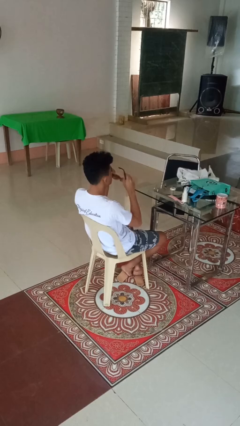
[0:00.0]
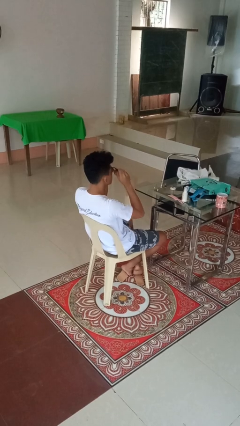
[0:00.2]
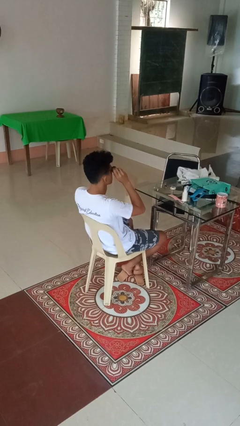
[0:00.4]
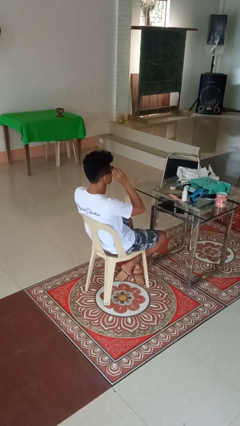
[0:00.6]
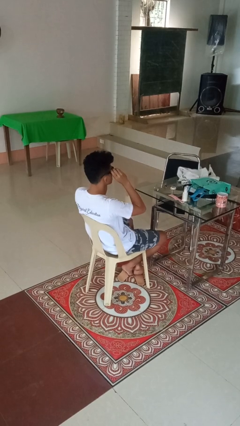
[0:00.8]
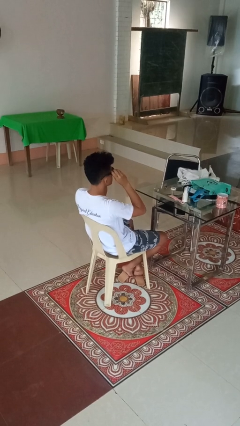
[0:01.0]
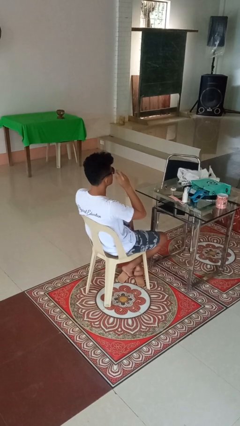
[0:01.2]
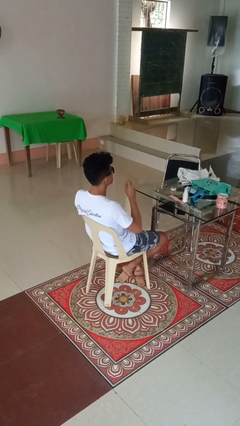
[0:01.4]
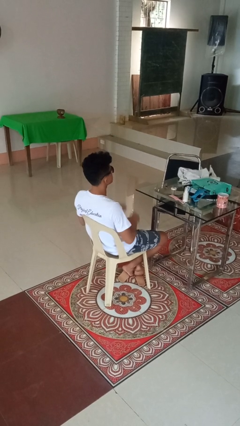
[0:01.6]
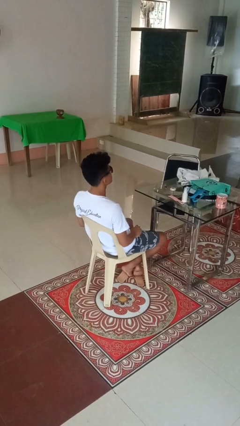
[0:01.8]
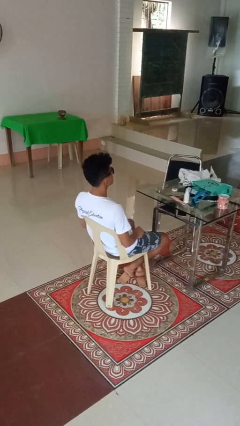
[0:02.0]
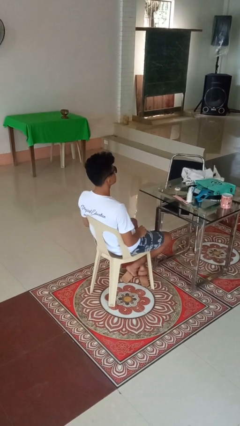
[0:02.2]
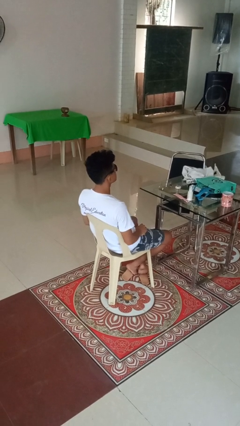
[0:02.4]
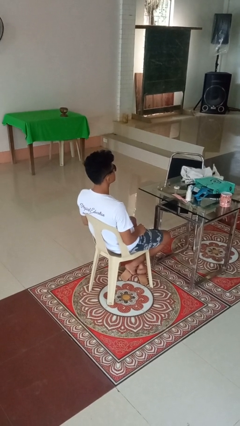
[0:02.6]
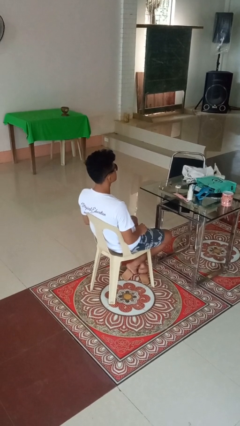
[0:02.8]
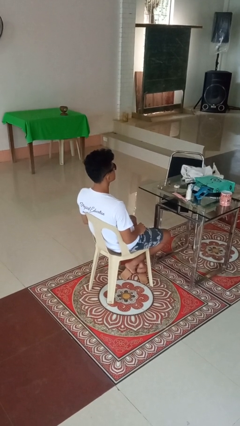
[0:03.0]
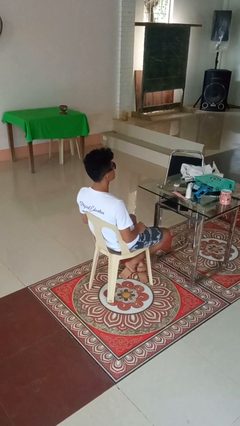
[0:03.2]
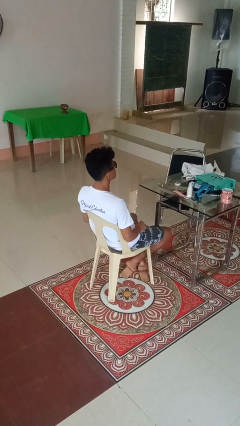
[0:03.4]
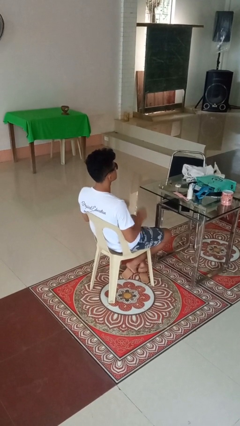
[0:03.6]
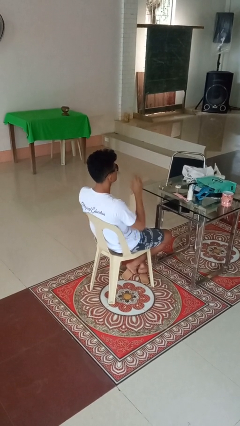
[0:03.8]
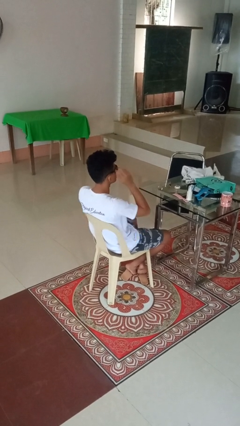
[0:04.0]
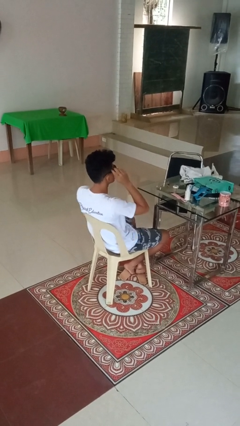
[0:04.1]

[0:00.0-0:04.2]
person puts on sunglasses

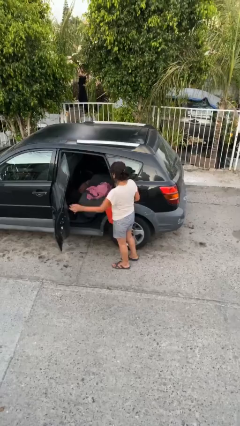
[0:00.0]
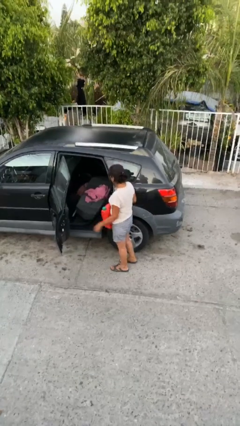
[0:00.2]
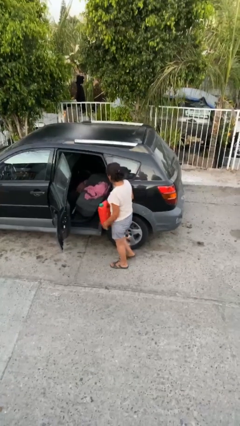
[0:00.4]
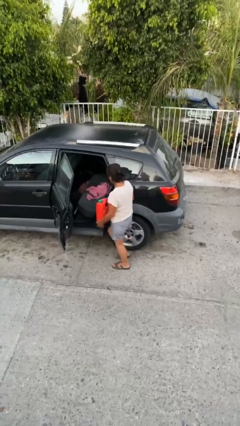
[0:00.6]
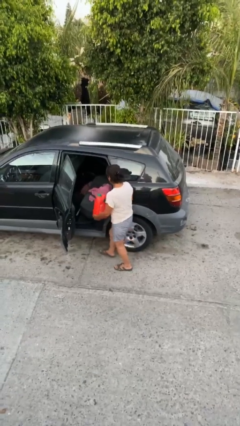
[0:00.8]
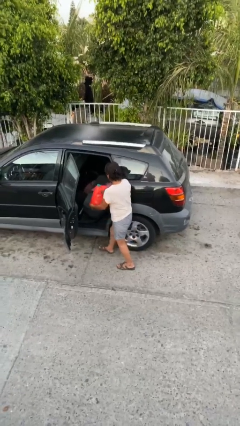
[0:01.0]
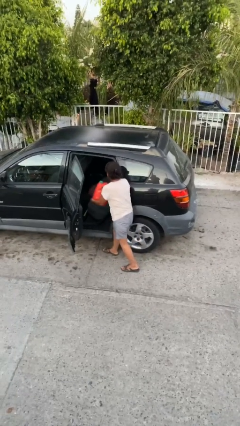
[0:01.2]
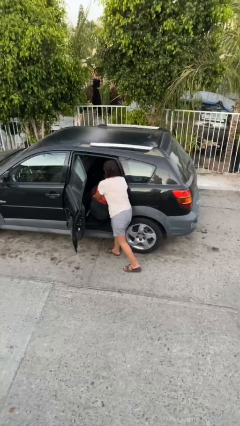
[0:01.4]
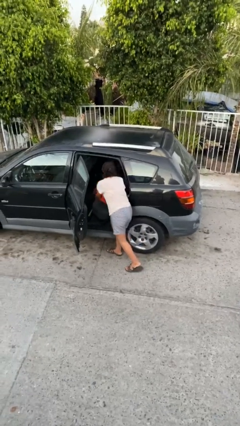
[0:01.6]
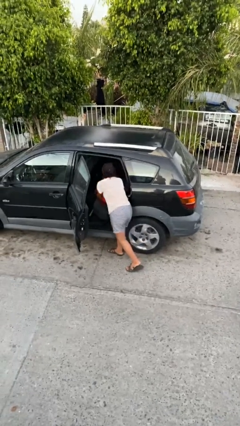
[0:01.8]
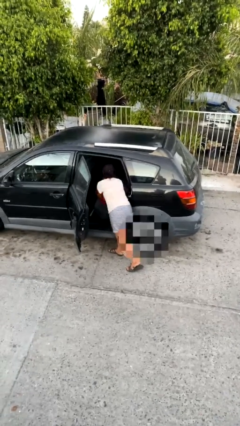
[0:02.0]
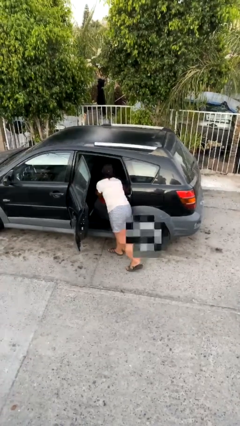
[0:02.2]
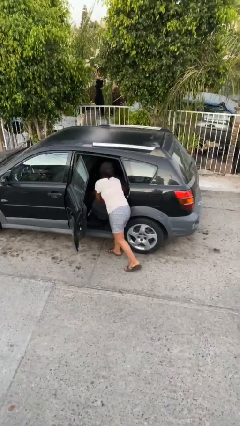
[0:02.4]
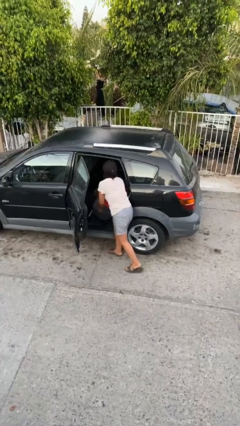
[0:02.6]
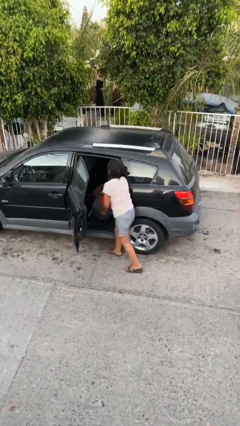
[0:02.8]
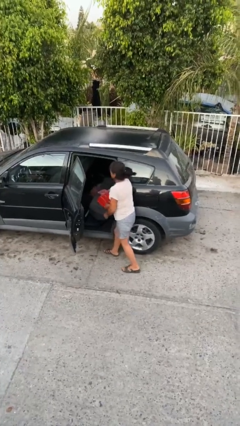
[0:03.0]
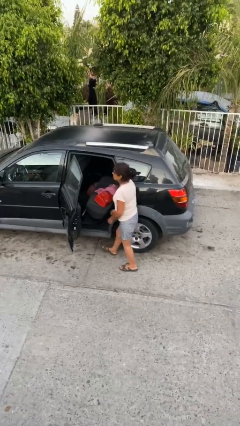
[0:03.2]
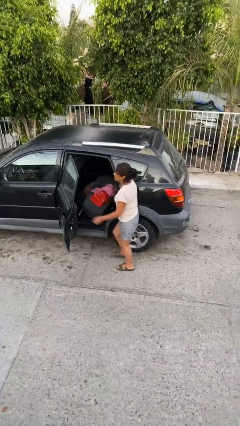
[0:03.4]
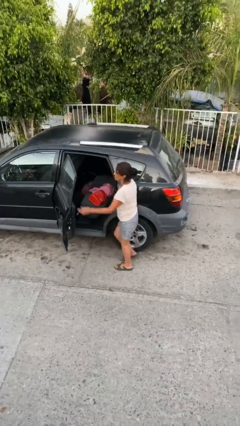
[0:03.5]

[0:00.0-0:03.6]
person loads car

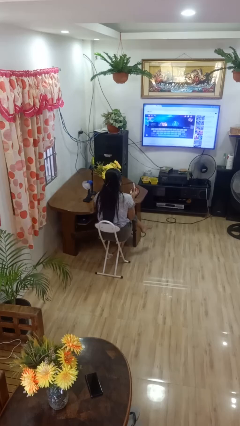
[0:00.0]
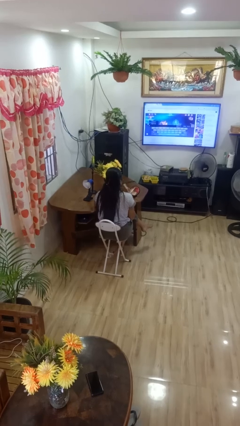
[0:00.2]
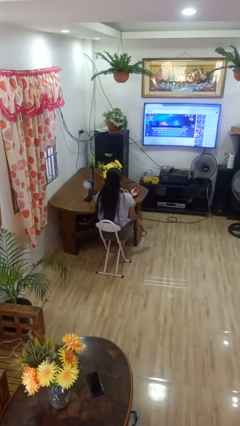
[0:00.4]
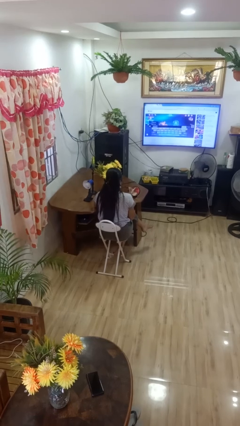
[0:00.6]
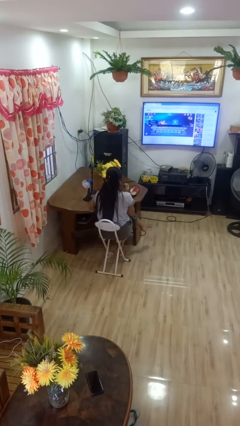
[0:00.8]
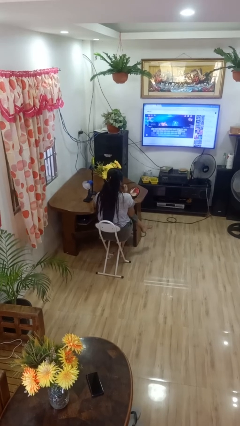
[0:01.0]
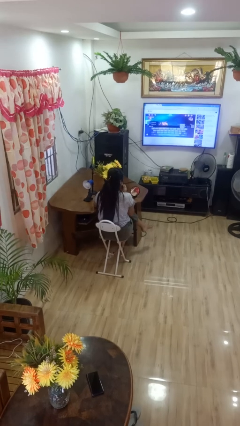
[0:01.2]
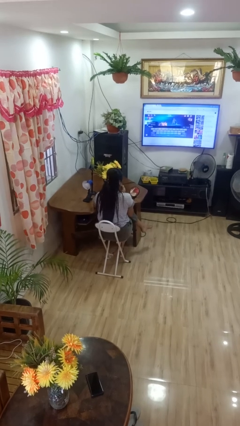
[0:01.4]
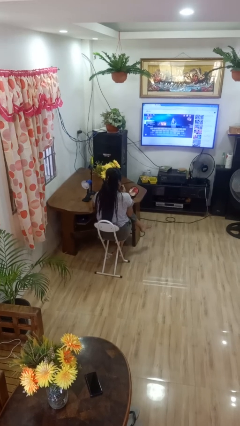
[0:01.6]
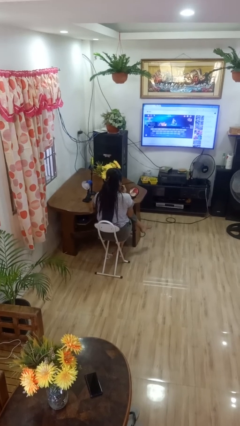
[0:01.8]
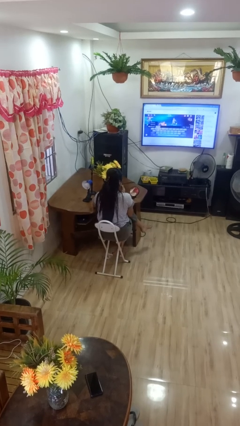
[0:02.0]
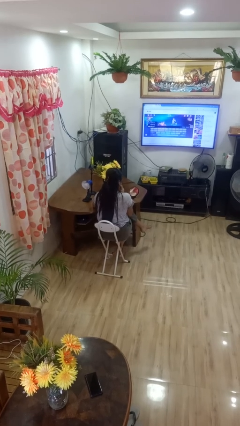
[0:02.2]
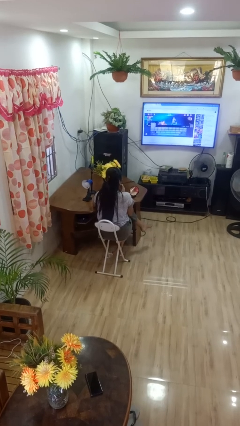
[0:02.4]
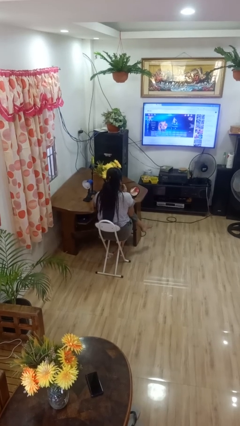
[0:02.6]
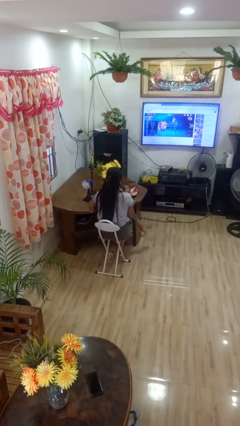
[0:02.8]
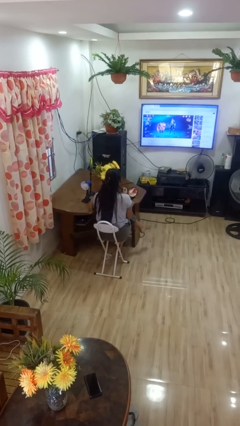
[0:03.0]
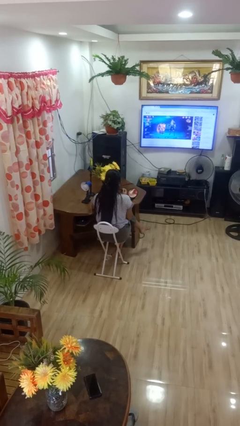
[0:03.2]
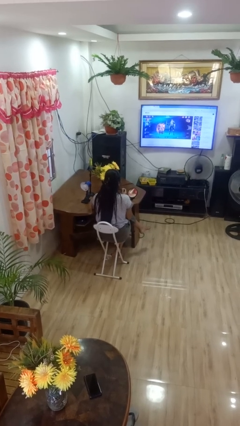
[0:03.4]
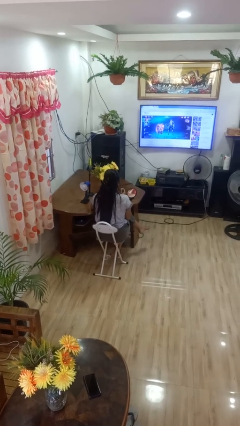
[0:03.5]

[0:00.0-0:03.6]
person applies lip makeup

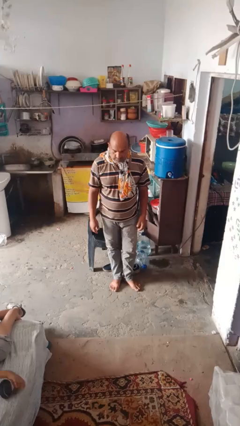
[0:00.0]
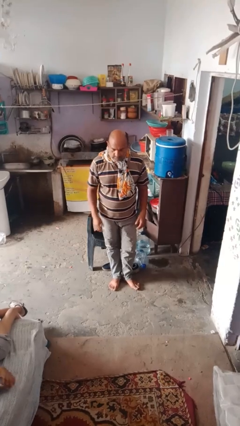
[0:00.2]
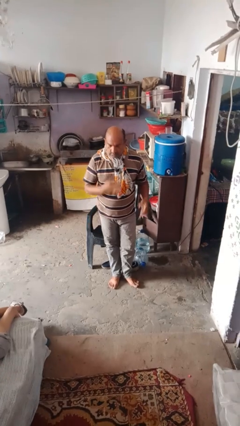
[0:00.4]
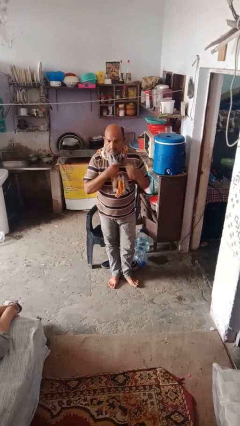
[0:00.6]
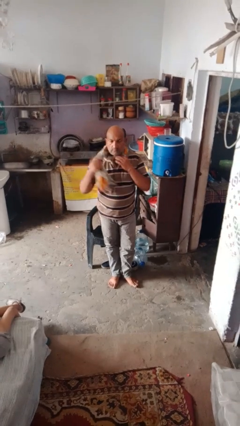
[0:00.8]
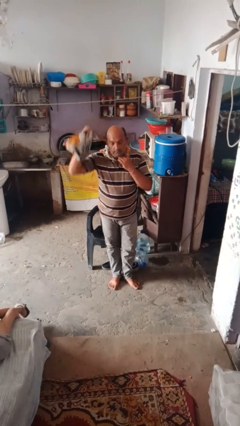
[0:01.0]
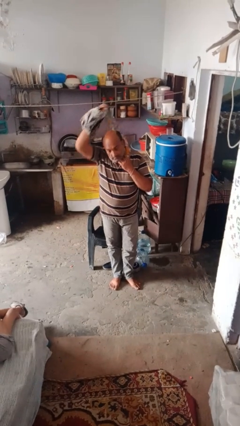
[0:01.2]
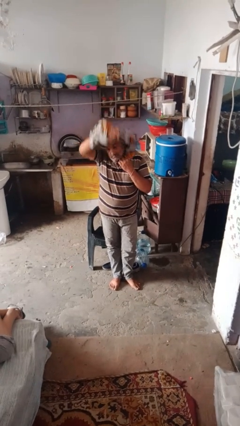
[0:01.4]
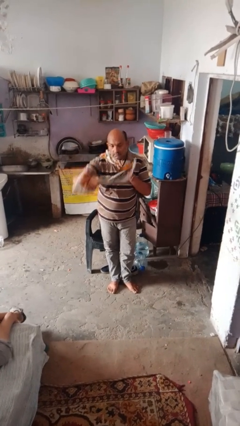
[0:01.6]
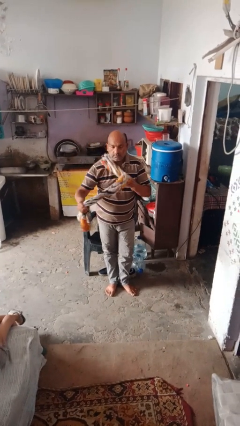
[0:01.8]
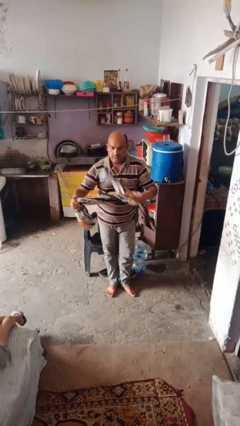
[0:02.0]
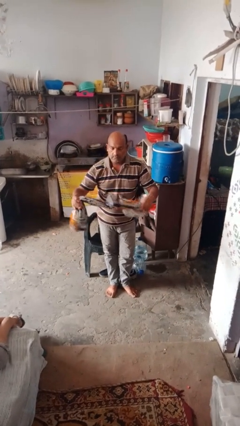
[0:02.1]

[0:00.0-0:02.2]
person takes off scarf

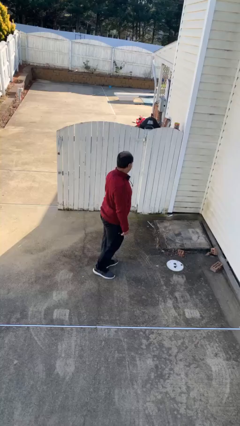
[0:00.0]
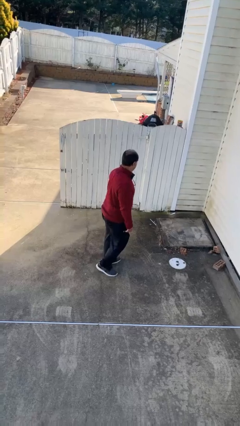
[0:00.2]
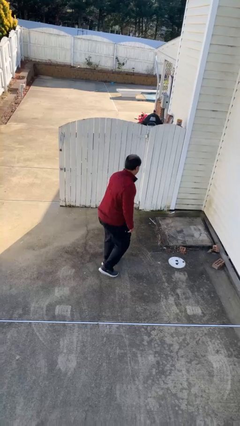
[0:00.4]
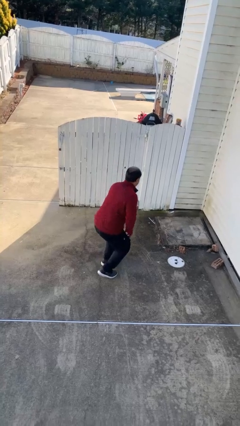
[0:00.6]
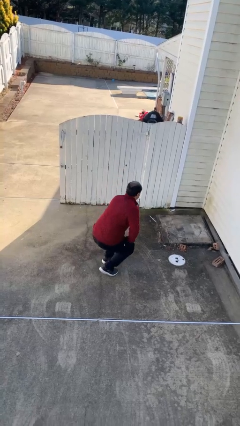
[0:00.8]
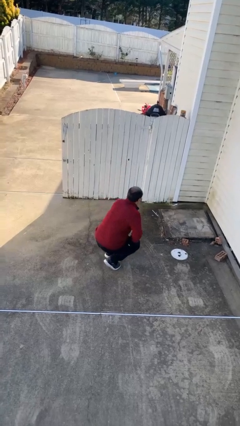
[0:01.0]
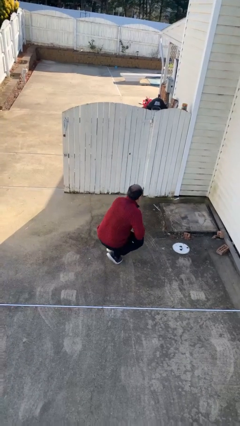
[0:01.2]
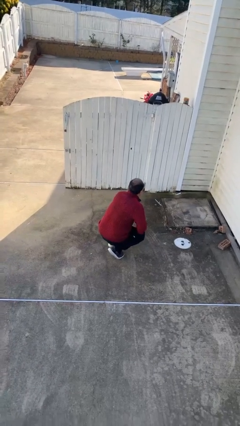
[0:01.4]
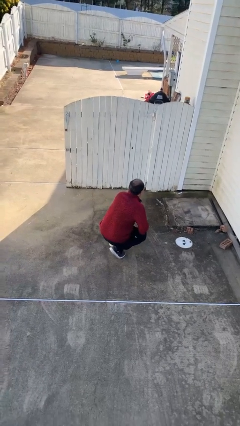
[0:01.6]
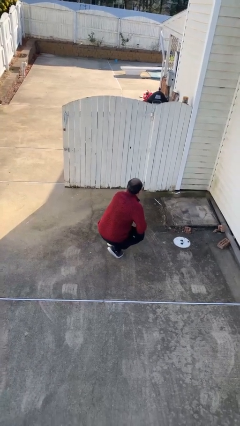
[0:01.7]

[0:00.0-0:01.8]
person sits down

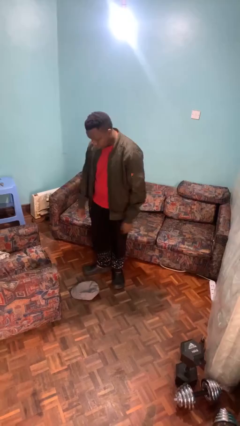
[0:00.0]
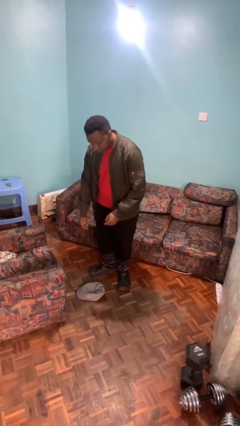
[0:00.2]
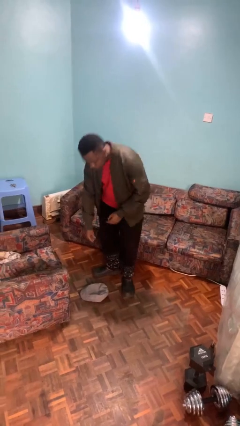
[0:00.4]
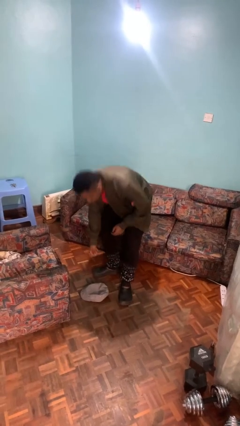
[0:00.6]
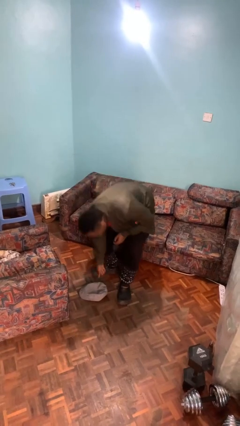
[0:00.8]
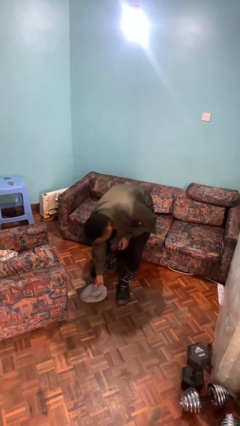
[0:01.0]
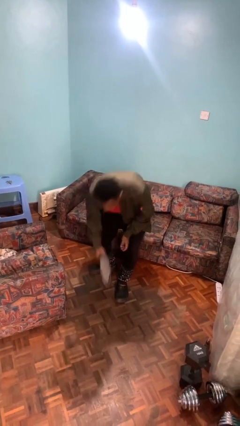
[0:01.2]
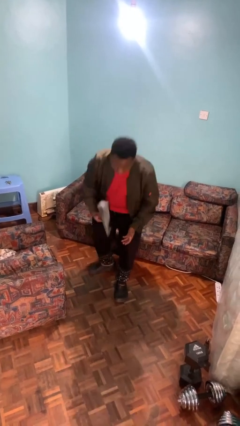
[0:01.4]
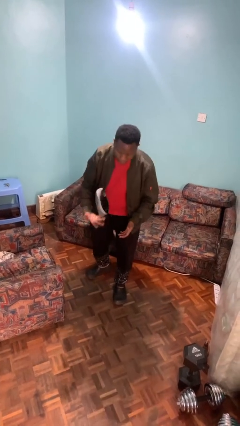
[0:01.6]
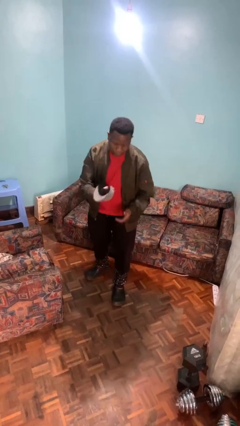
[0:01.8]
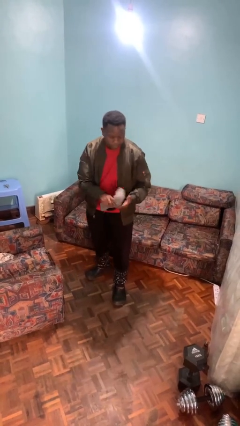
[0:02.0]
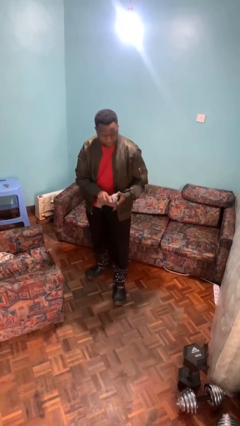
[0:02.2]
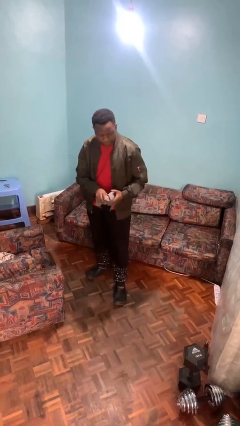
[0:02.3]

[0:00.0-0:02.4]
person picks up object from floor
